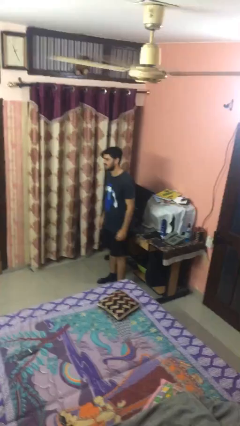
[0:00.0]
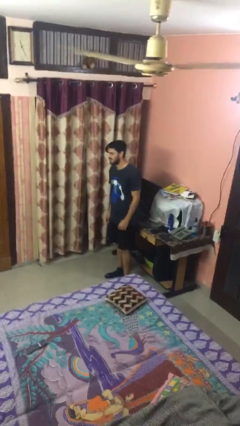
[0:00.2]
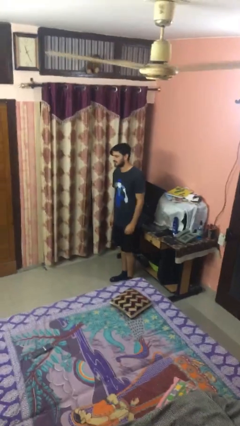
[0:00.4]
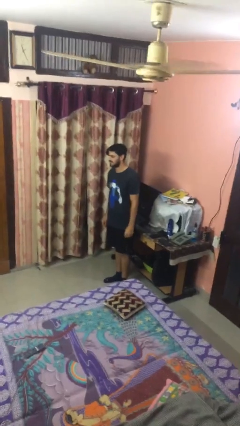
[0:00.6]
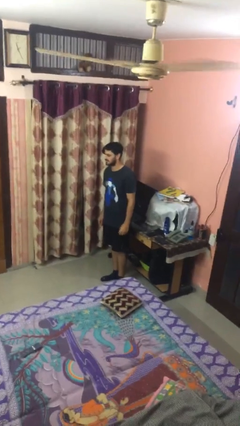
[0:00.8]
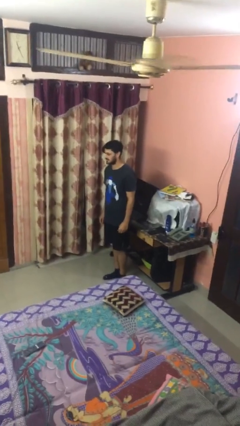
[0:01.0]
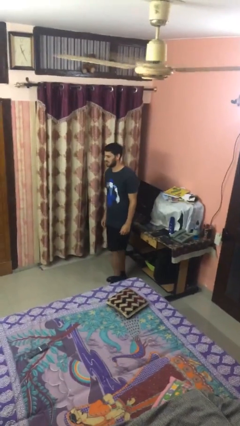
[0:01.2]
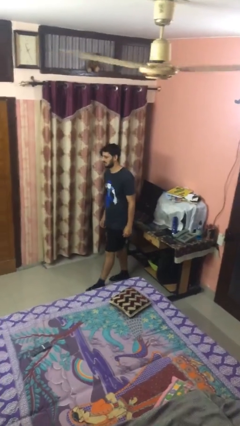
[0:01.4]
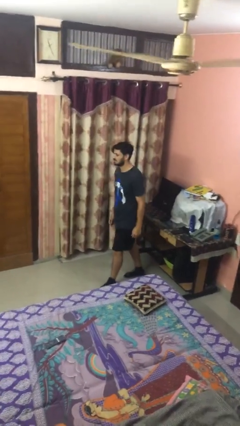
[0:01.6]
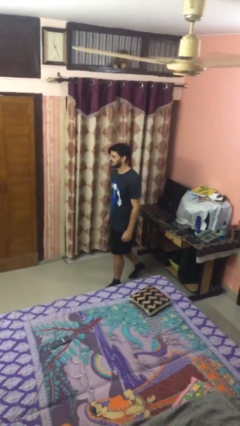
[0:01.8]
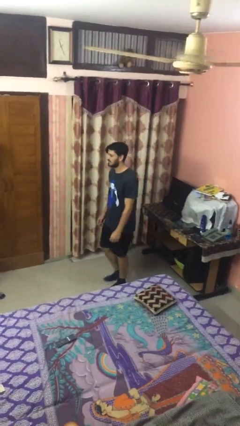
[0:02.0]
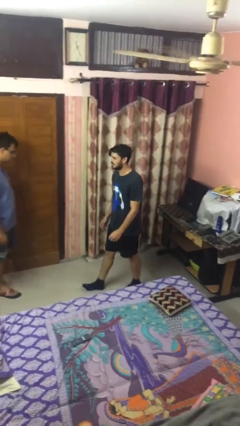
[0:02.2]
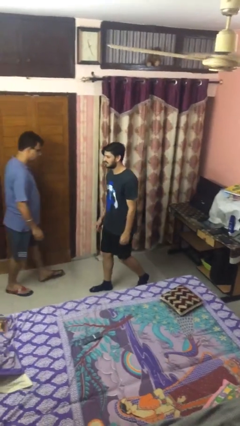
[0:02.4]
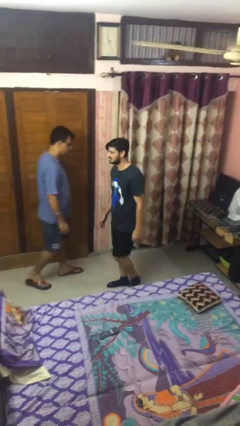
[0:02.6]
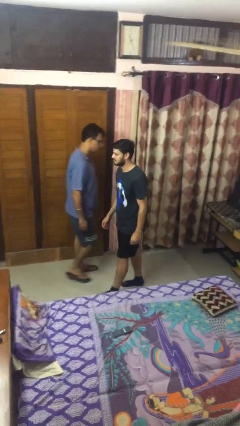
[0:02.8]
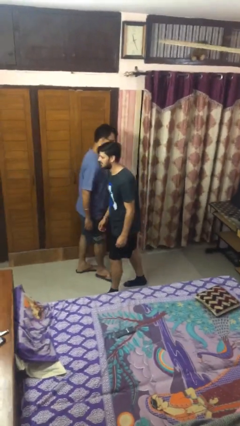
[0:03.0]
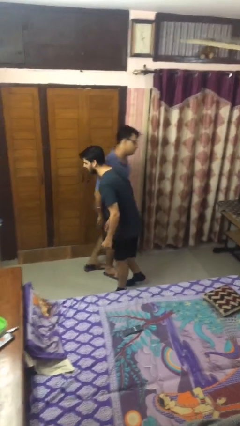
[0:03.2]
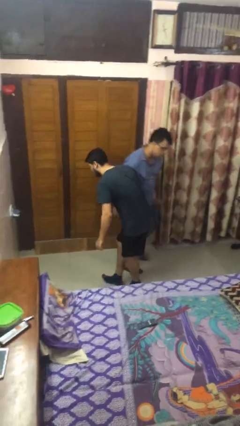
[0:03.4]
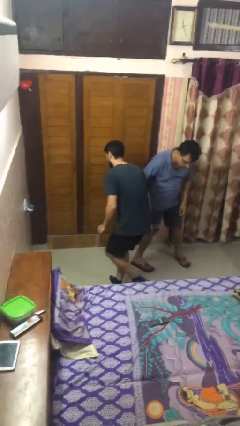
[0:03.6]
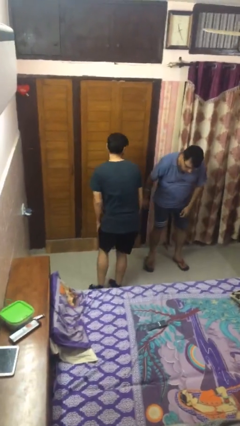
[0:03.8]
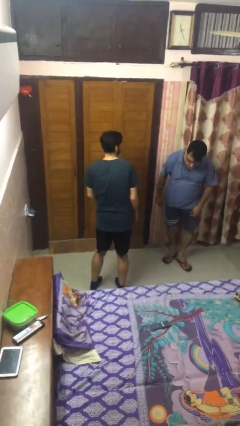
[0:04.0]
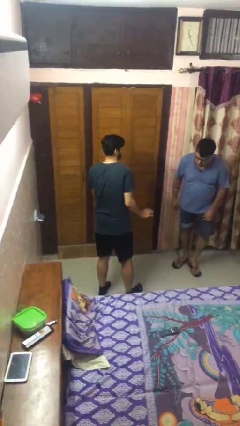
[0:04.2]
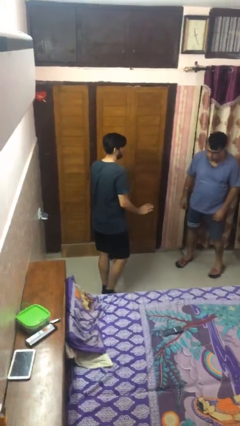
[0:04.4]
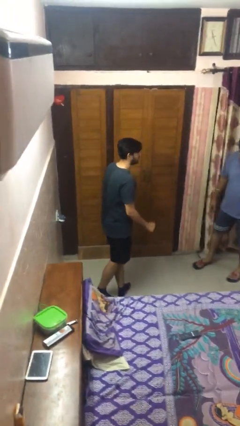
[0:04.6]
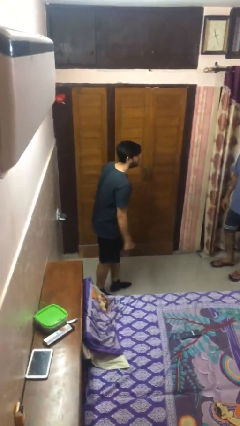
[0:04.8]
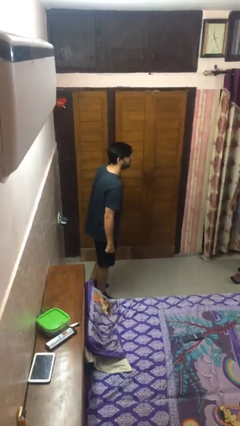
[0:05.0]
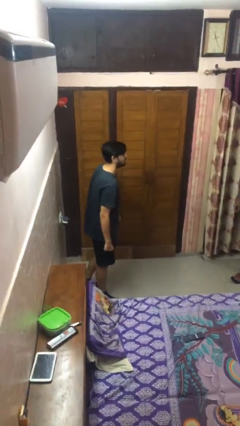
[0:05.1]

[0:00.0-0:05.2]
person bumps into person

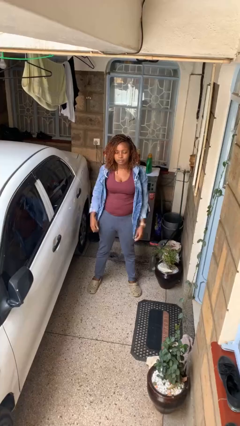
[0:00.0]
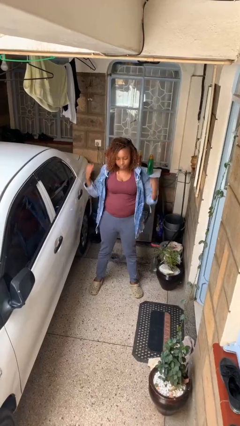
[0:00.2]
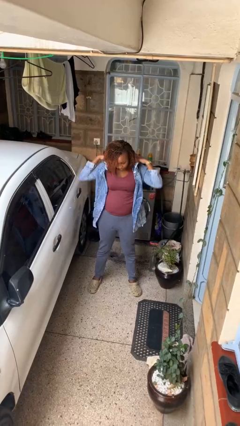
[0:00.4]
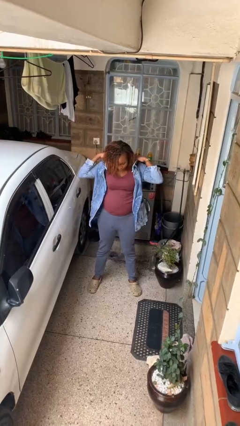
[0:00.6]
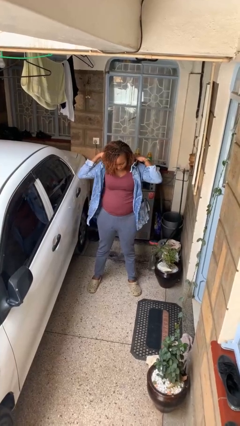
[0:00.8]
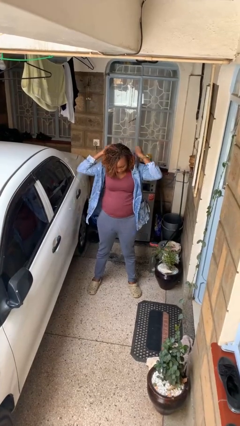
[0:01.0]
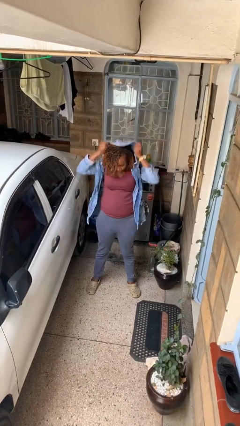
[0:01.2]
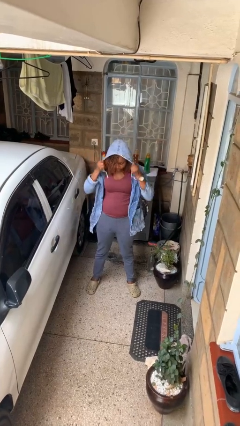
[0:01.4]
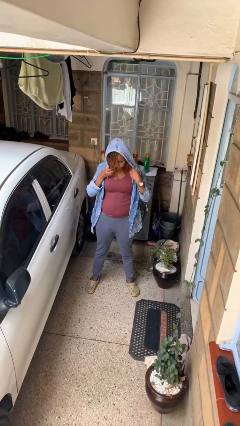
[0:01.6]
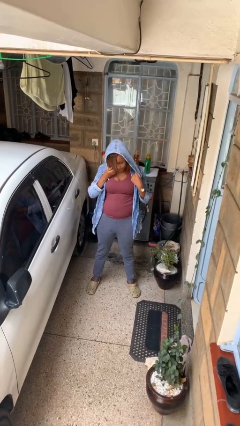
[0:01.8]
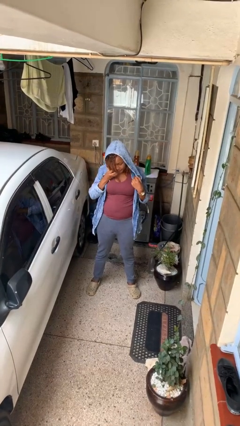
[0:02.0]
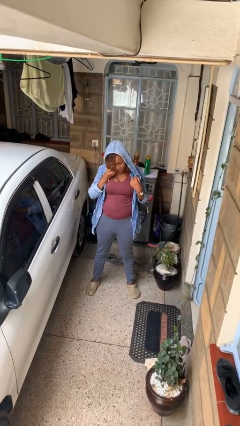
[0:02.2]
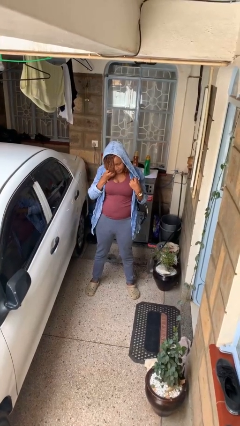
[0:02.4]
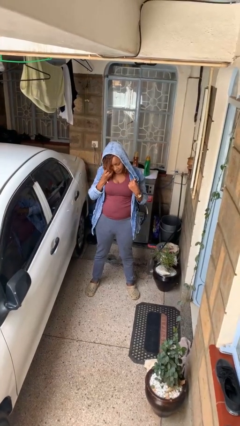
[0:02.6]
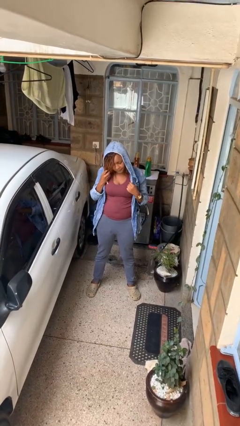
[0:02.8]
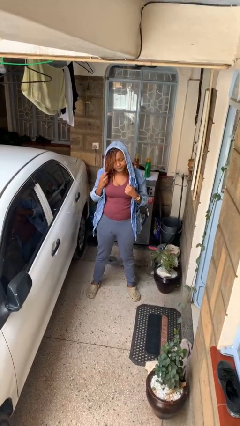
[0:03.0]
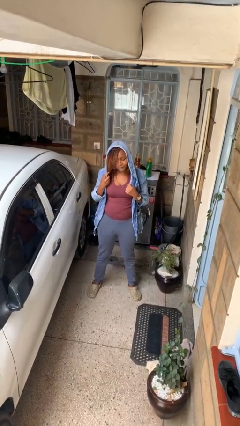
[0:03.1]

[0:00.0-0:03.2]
person puts on hoodie

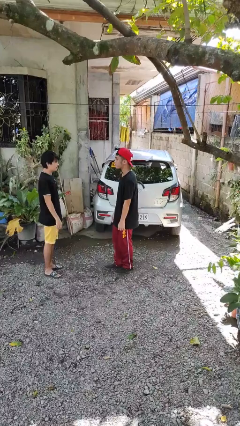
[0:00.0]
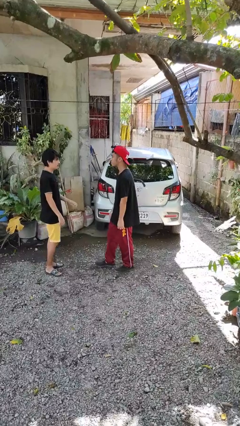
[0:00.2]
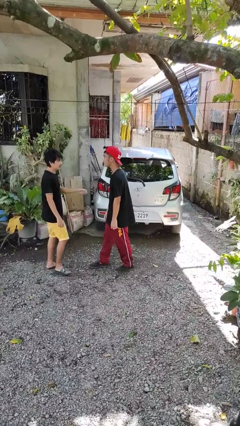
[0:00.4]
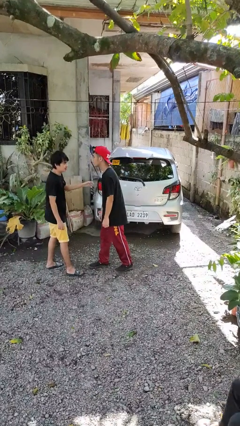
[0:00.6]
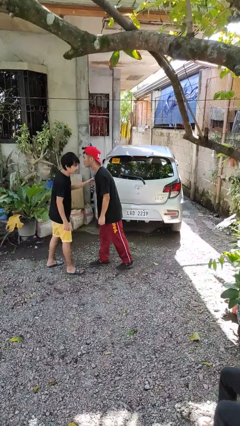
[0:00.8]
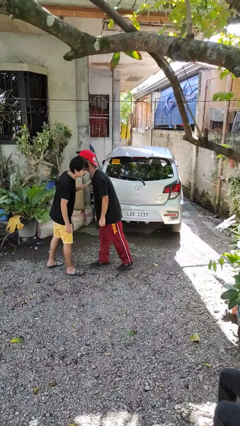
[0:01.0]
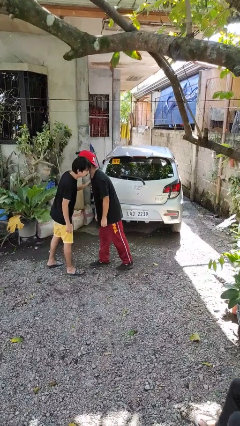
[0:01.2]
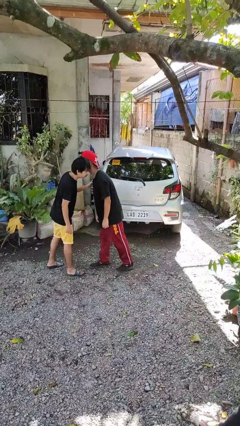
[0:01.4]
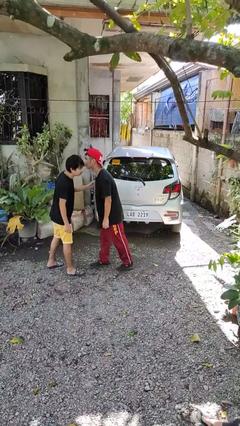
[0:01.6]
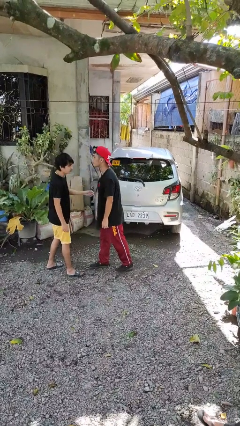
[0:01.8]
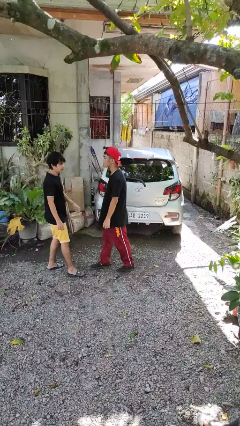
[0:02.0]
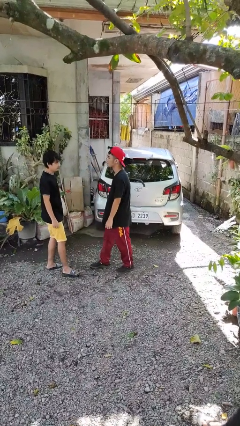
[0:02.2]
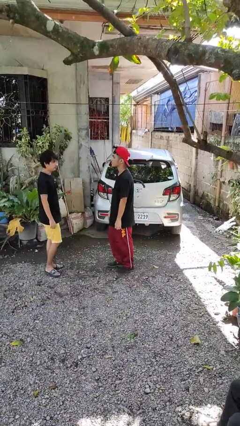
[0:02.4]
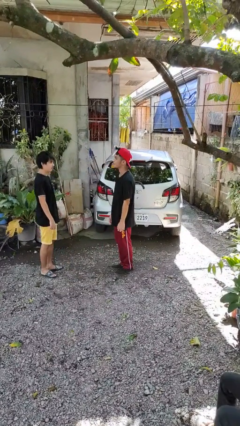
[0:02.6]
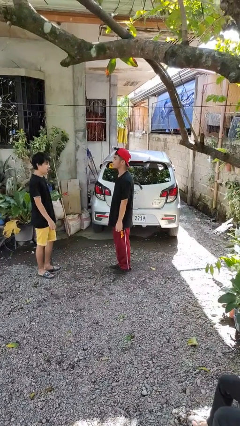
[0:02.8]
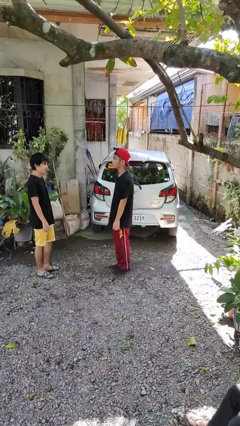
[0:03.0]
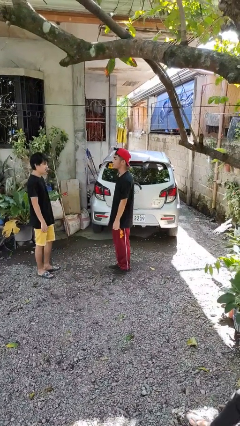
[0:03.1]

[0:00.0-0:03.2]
person kisses cheek of person

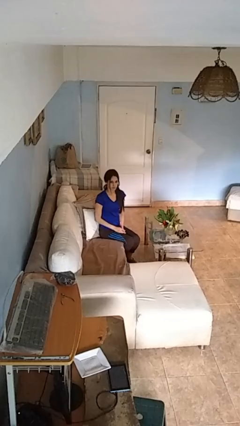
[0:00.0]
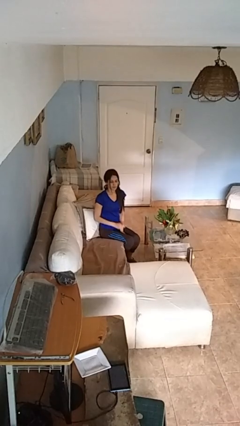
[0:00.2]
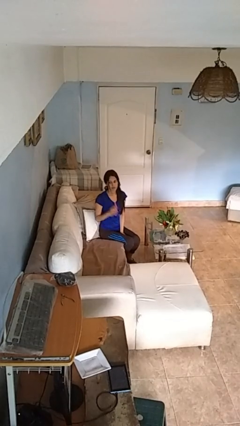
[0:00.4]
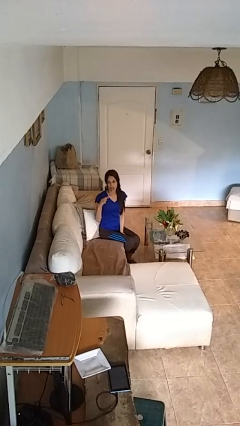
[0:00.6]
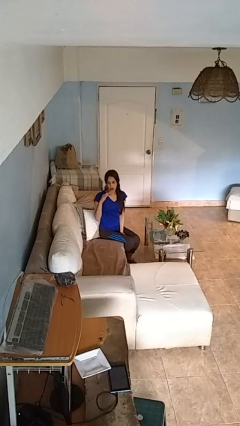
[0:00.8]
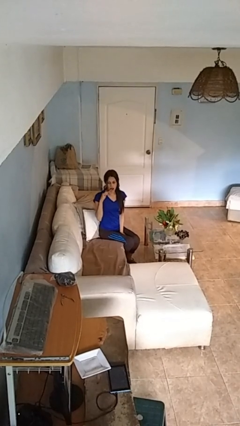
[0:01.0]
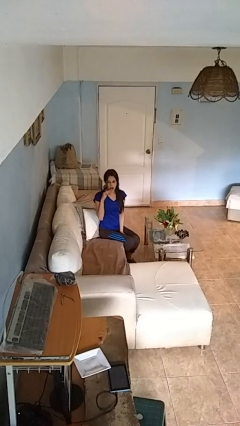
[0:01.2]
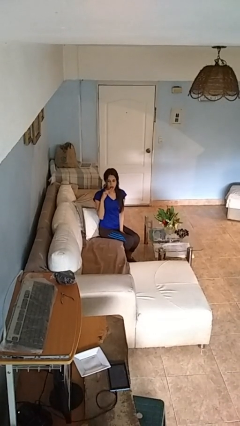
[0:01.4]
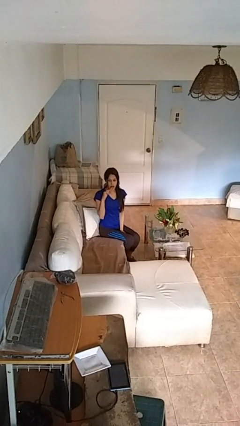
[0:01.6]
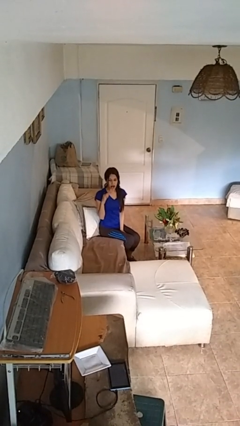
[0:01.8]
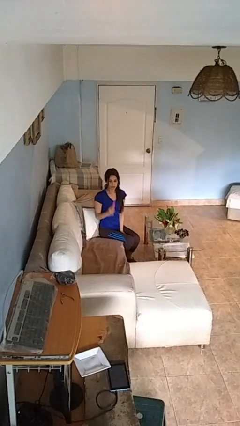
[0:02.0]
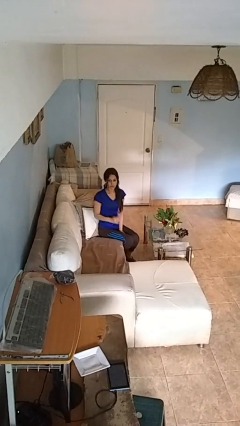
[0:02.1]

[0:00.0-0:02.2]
person brushes teeth

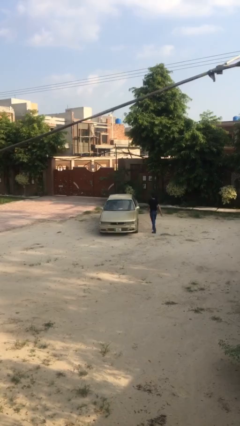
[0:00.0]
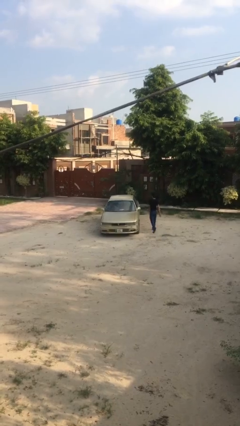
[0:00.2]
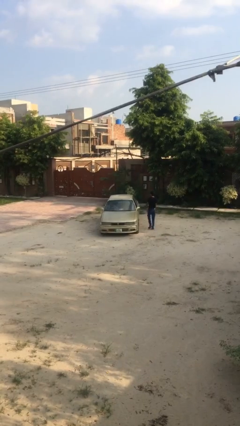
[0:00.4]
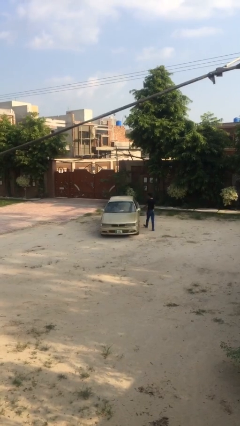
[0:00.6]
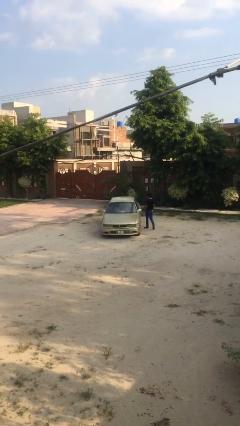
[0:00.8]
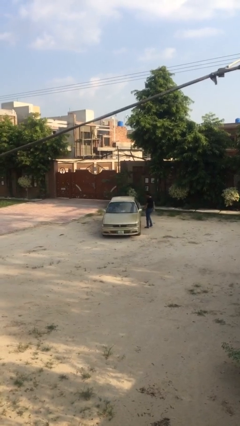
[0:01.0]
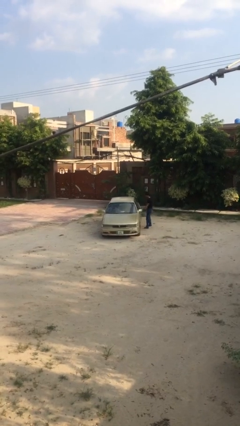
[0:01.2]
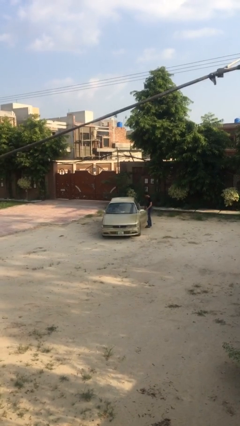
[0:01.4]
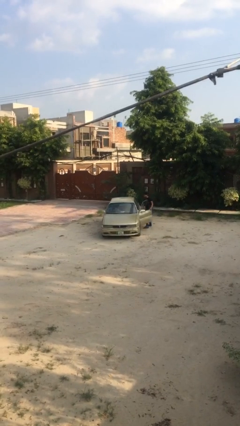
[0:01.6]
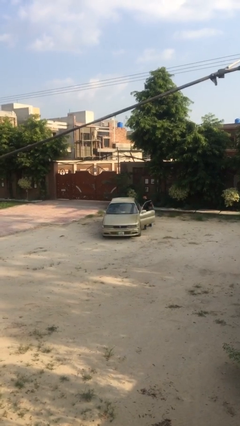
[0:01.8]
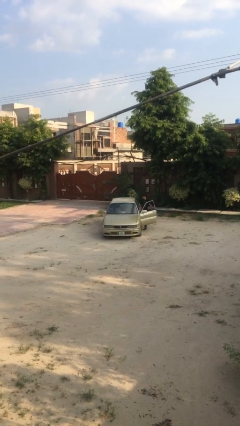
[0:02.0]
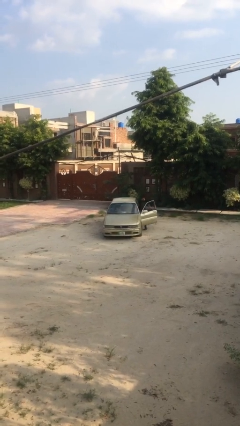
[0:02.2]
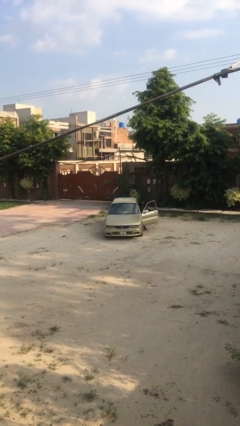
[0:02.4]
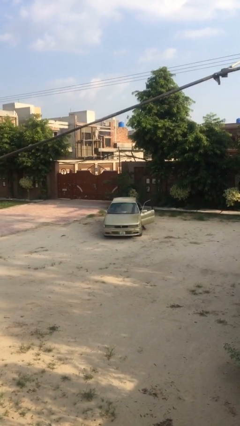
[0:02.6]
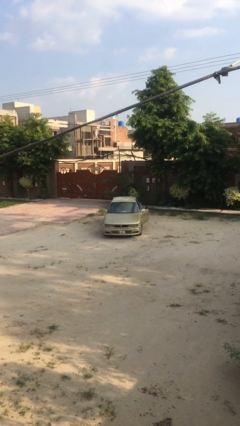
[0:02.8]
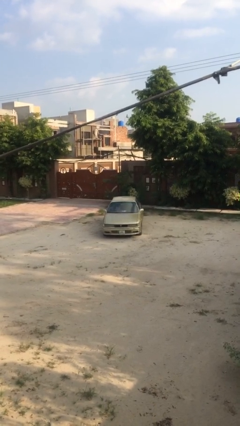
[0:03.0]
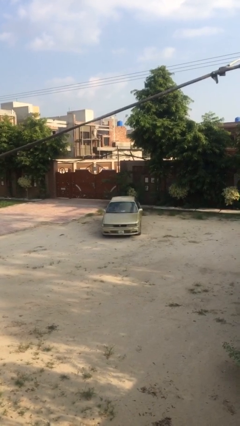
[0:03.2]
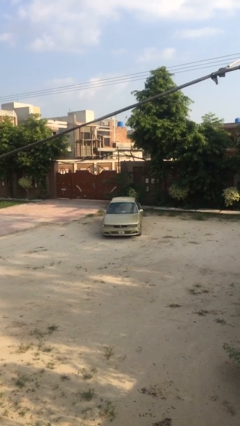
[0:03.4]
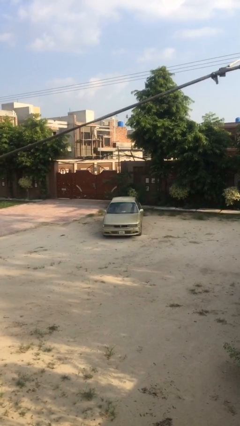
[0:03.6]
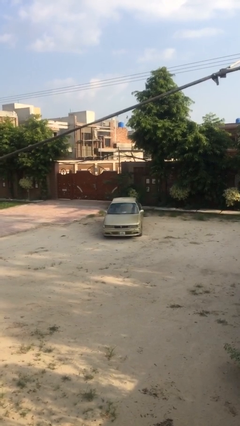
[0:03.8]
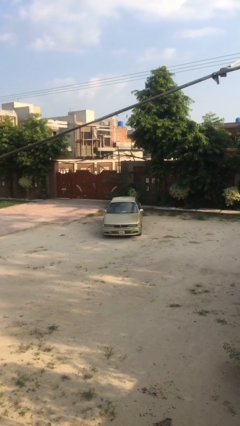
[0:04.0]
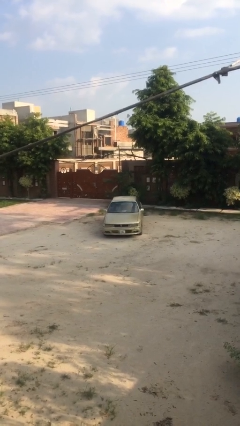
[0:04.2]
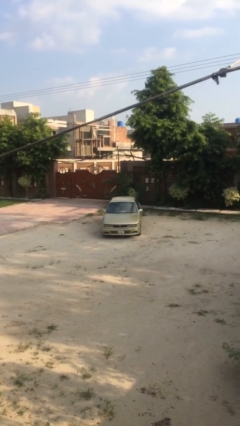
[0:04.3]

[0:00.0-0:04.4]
car picks up person
